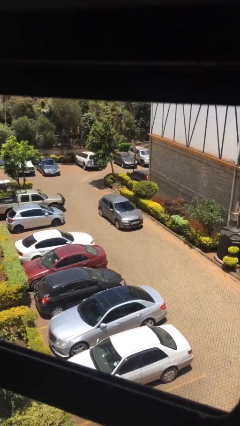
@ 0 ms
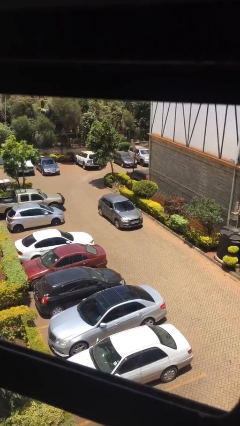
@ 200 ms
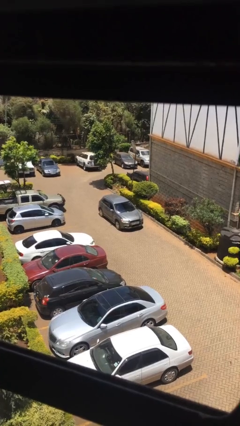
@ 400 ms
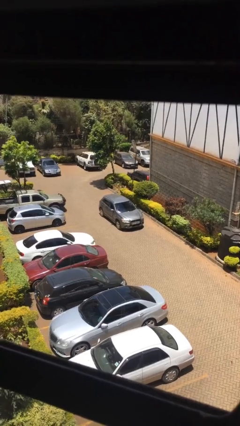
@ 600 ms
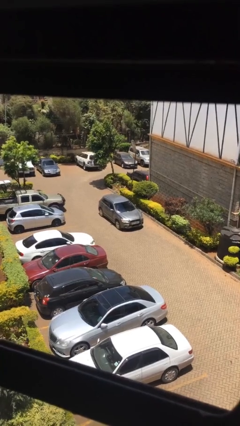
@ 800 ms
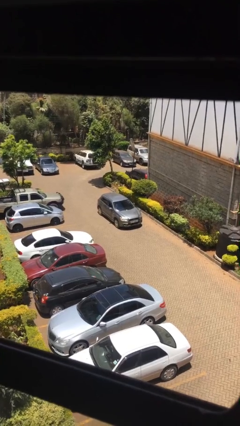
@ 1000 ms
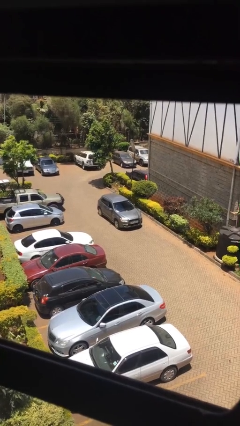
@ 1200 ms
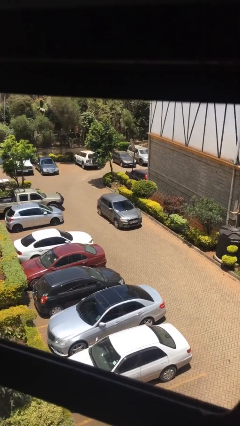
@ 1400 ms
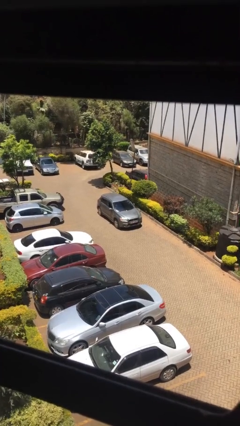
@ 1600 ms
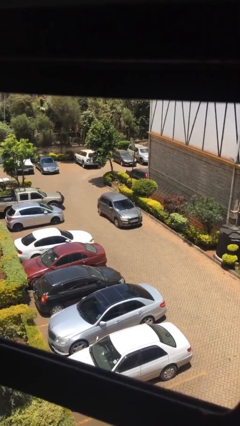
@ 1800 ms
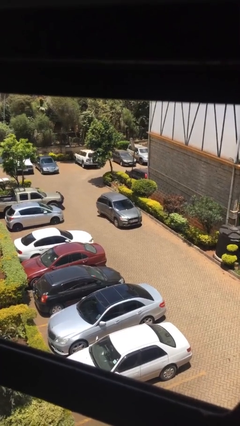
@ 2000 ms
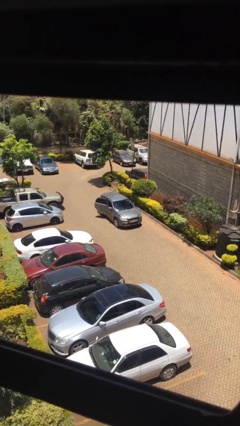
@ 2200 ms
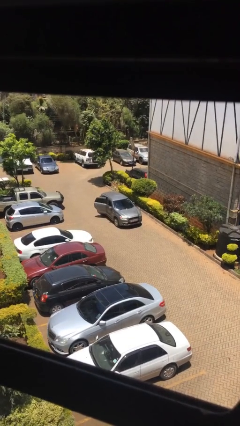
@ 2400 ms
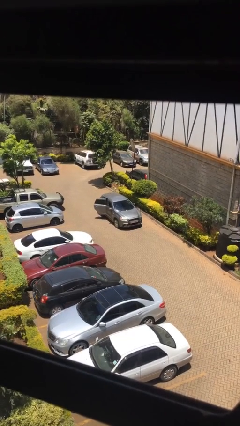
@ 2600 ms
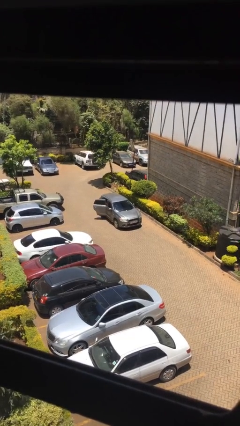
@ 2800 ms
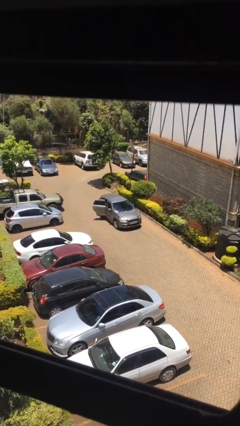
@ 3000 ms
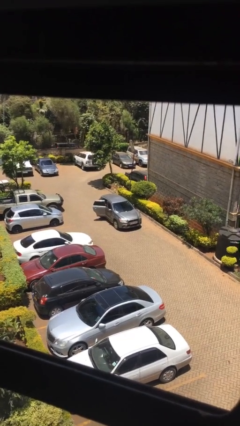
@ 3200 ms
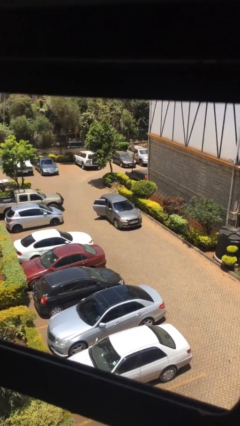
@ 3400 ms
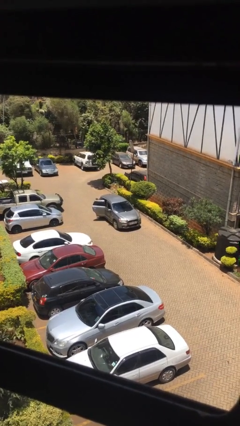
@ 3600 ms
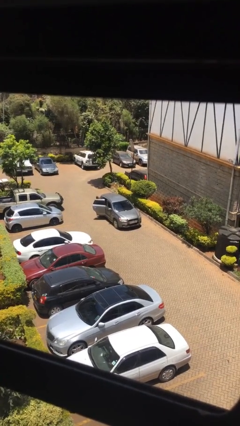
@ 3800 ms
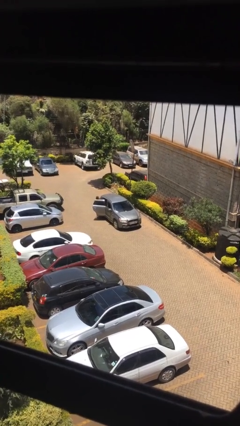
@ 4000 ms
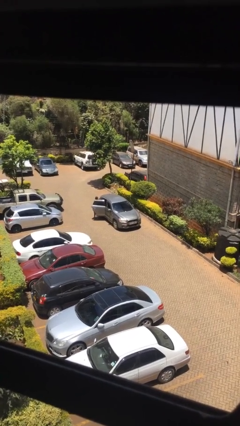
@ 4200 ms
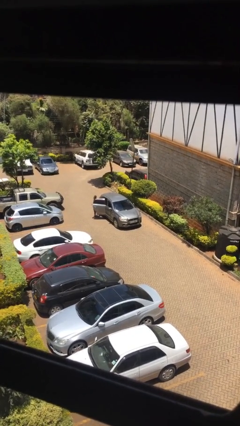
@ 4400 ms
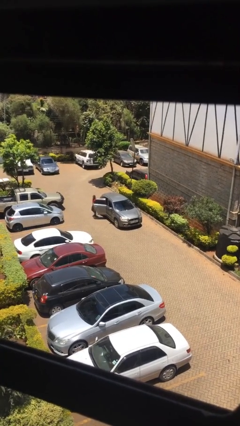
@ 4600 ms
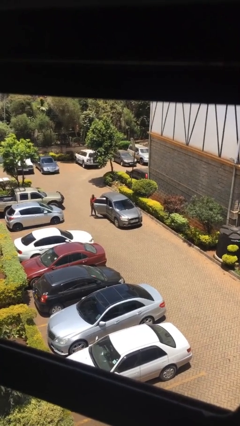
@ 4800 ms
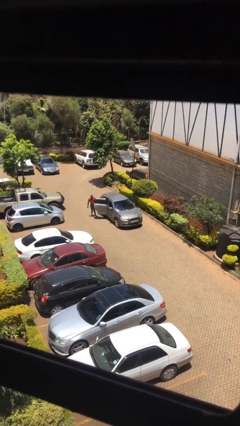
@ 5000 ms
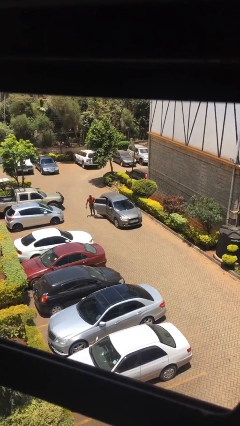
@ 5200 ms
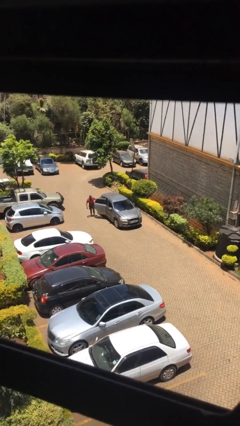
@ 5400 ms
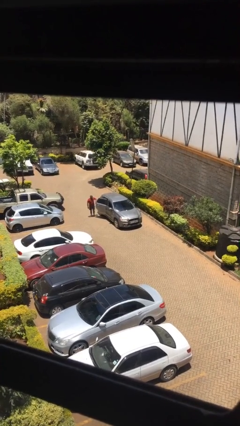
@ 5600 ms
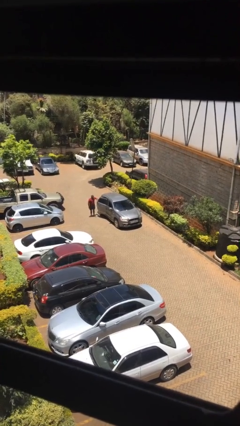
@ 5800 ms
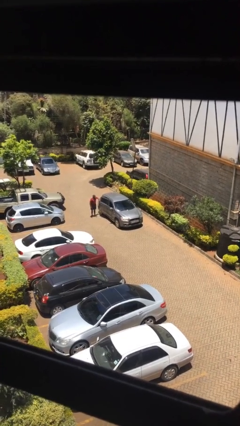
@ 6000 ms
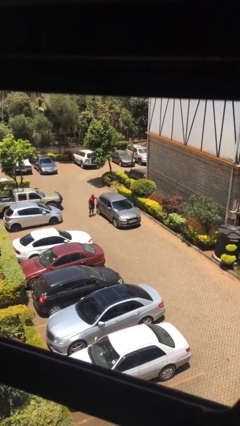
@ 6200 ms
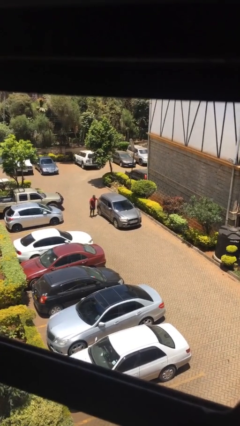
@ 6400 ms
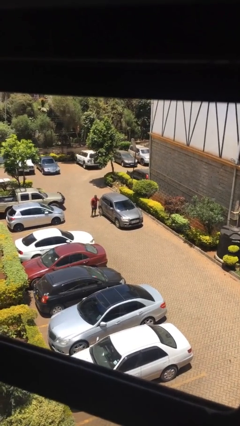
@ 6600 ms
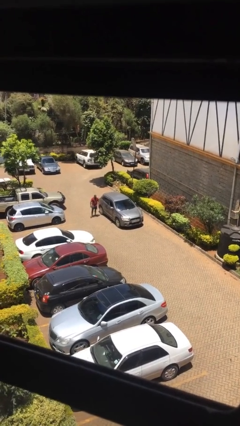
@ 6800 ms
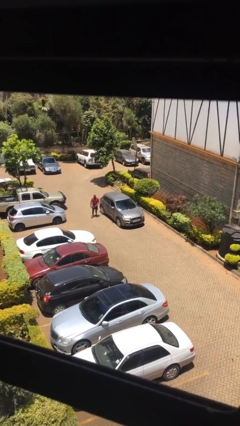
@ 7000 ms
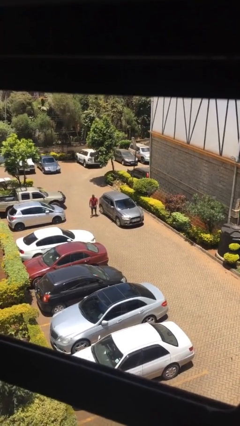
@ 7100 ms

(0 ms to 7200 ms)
car drops off person

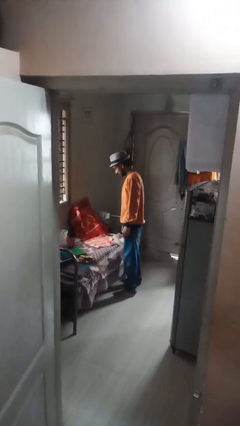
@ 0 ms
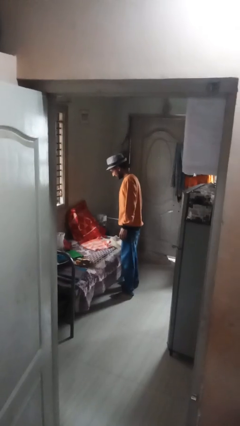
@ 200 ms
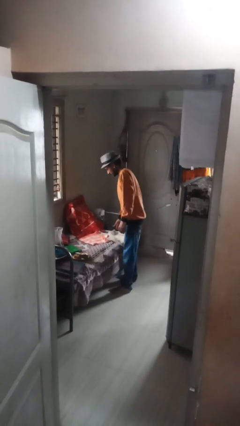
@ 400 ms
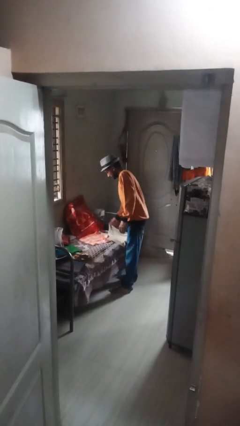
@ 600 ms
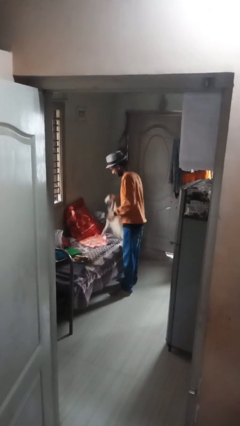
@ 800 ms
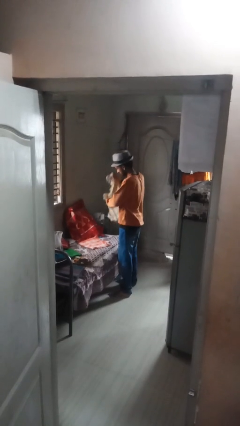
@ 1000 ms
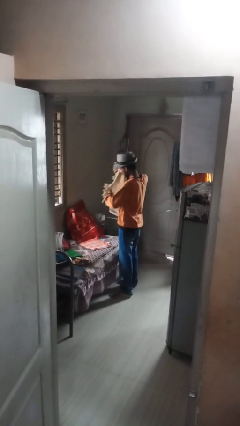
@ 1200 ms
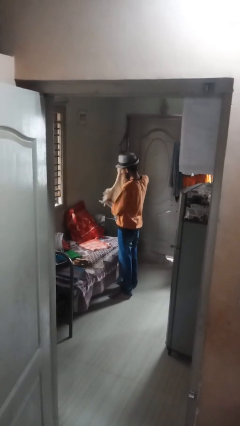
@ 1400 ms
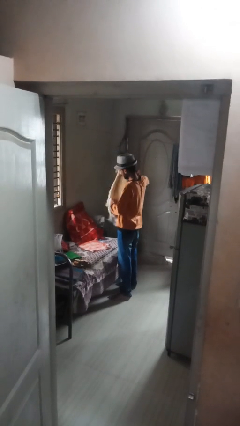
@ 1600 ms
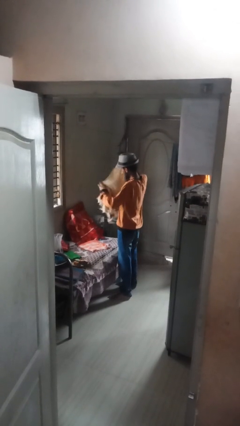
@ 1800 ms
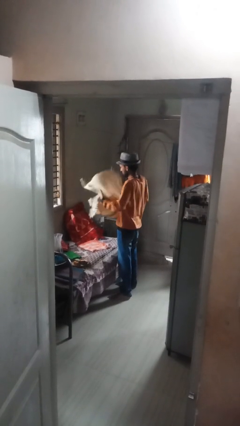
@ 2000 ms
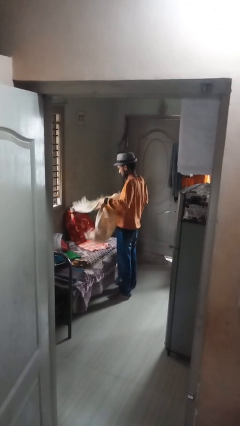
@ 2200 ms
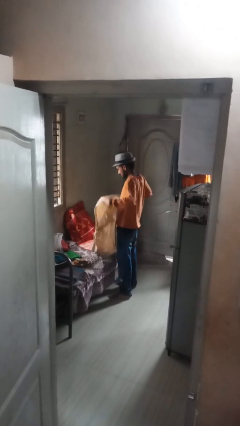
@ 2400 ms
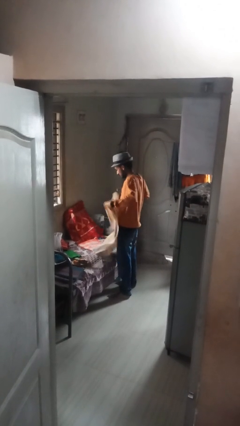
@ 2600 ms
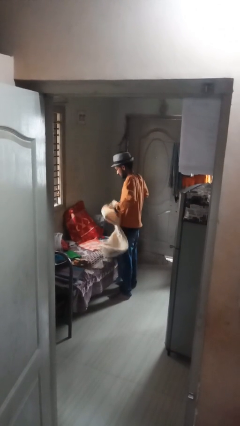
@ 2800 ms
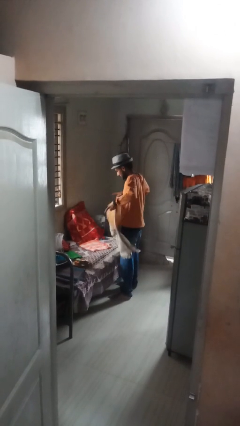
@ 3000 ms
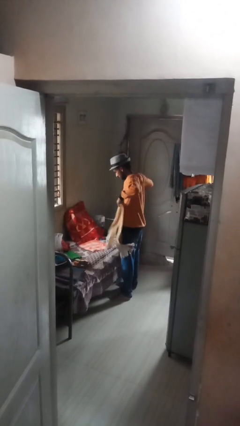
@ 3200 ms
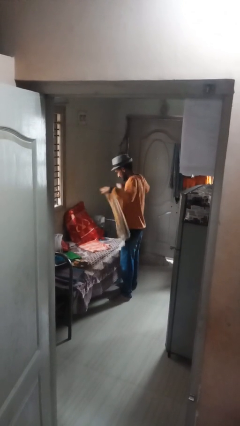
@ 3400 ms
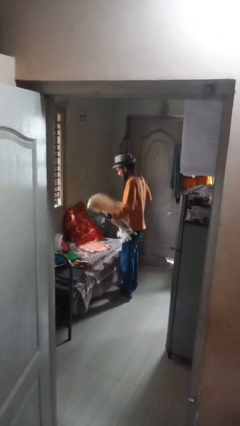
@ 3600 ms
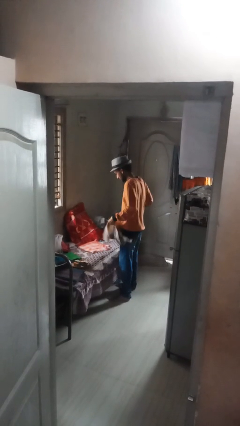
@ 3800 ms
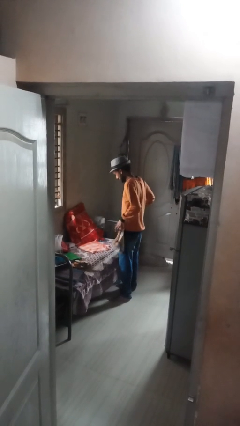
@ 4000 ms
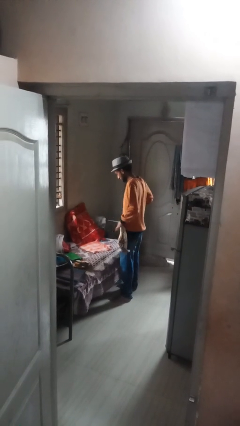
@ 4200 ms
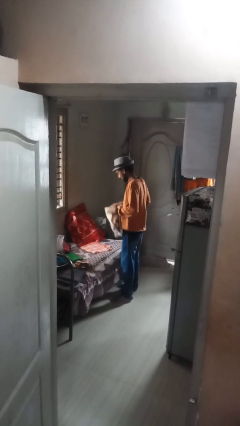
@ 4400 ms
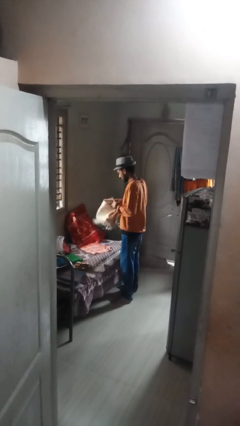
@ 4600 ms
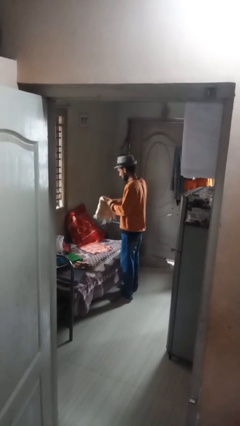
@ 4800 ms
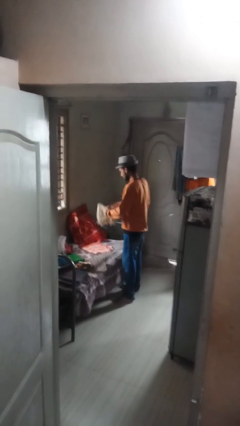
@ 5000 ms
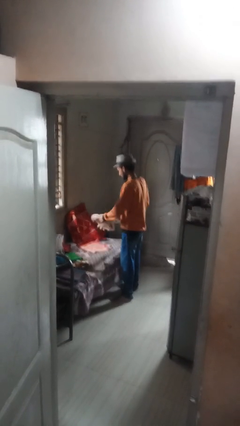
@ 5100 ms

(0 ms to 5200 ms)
person folds towel

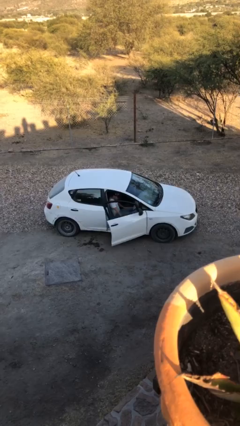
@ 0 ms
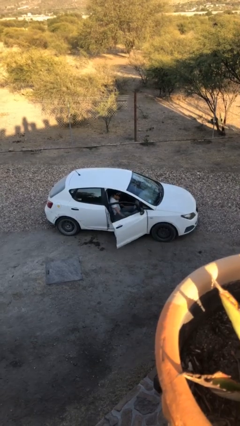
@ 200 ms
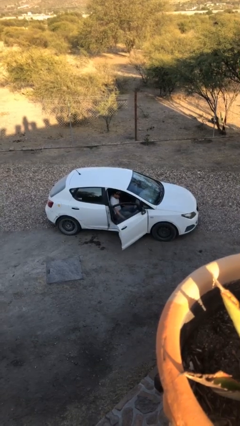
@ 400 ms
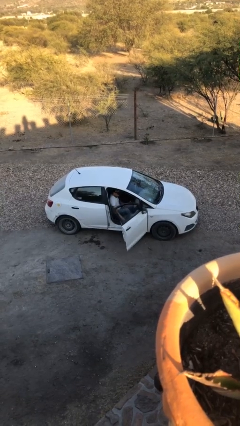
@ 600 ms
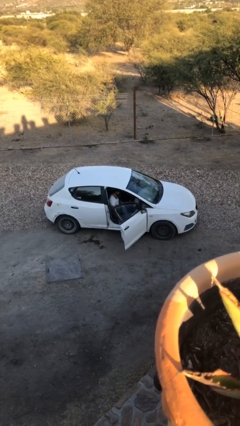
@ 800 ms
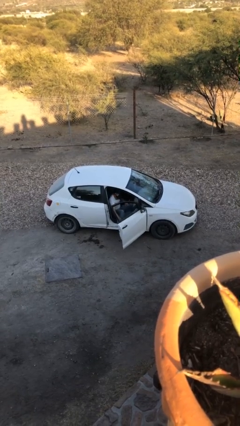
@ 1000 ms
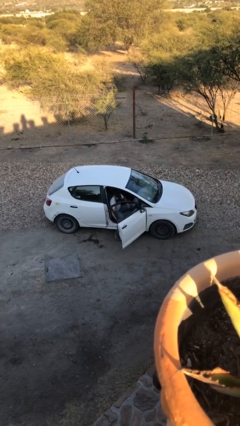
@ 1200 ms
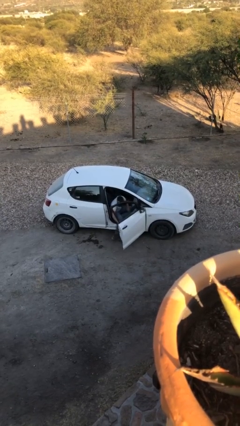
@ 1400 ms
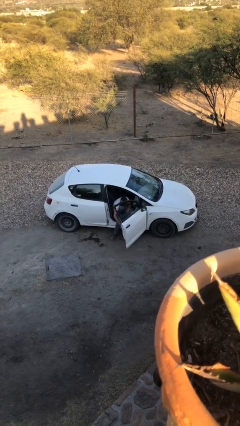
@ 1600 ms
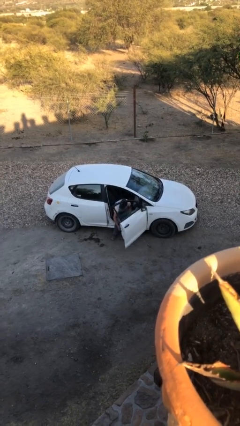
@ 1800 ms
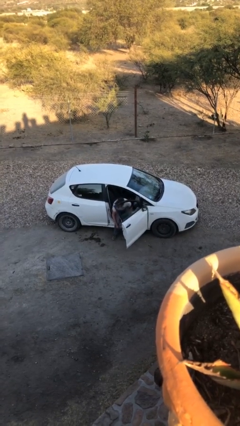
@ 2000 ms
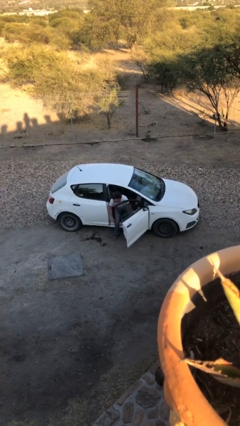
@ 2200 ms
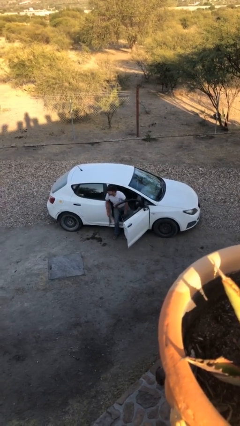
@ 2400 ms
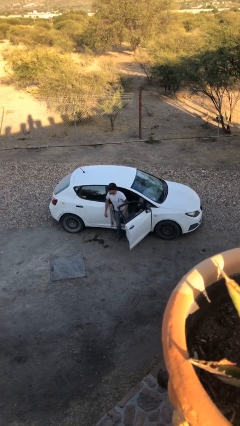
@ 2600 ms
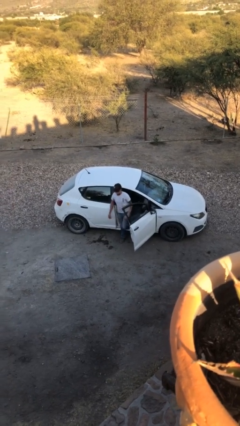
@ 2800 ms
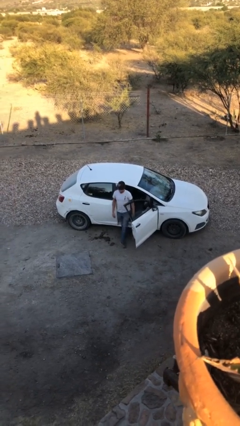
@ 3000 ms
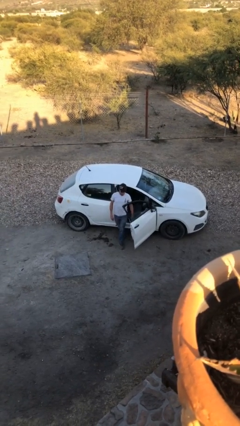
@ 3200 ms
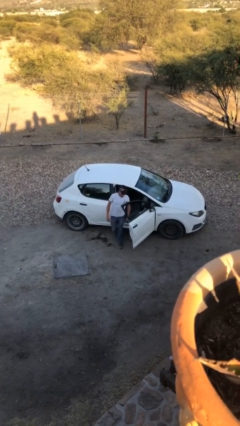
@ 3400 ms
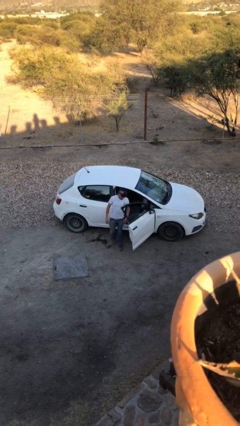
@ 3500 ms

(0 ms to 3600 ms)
person exits car

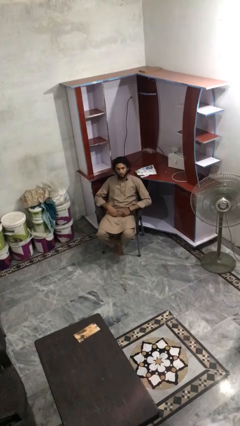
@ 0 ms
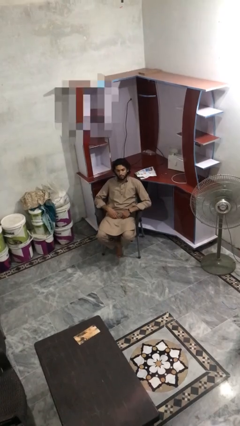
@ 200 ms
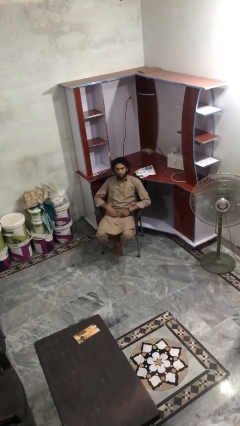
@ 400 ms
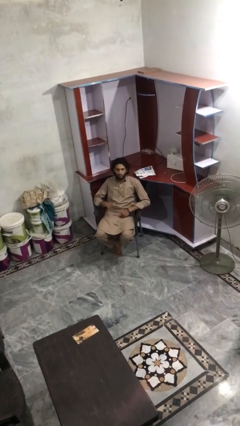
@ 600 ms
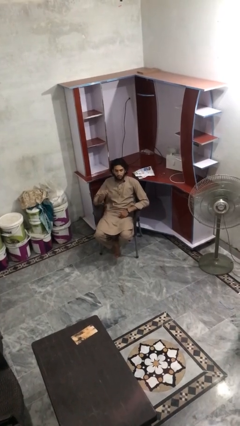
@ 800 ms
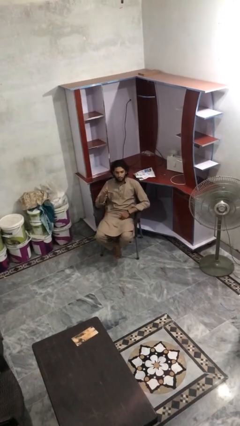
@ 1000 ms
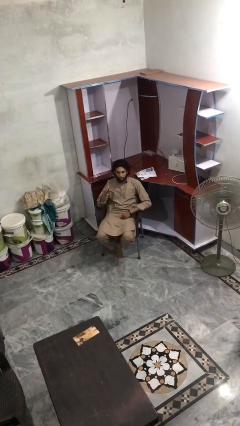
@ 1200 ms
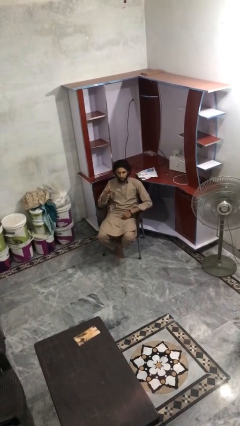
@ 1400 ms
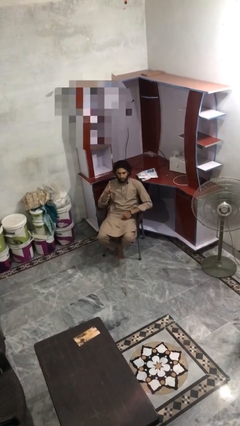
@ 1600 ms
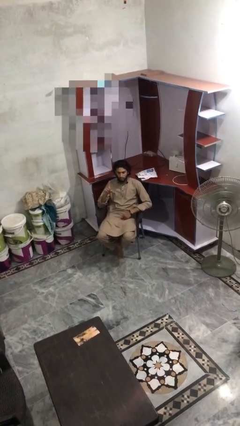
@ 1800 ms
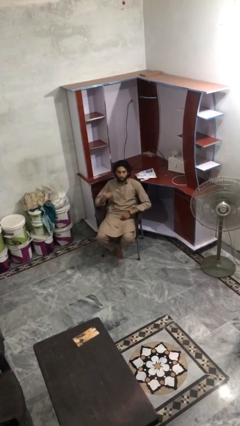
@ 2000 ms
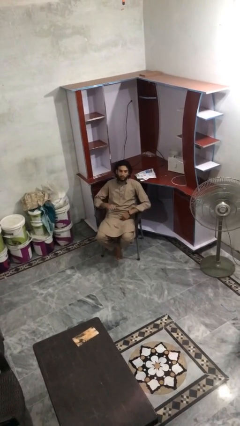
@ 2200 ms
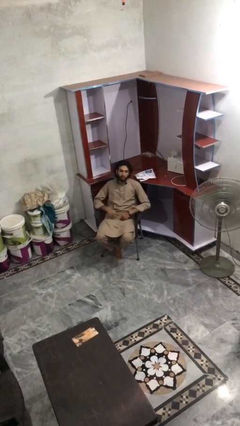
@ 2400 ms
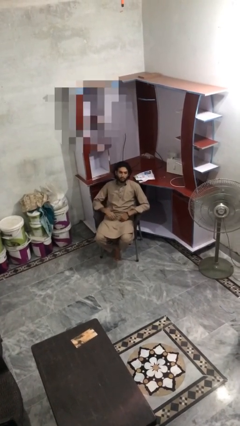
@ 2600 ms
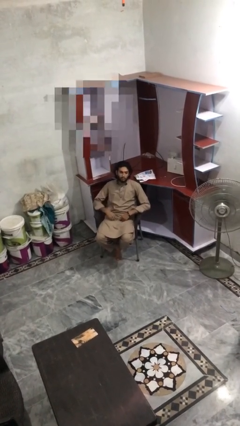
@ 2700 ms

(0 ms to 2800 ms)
person gestures number one
